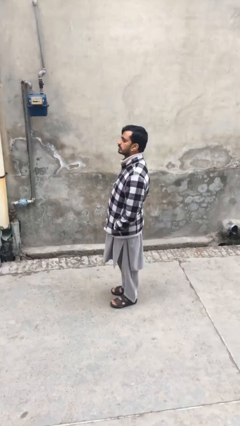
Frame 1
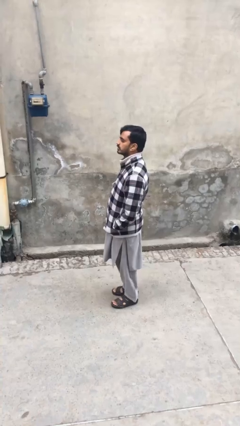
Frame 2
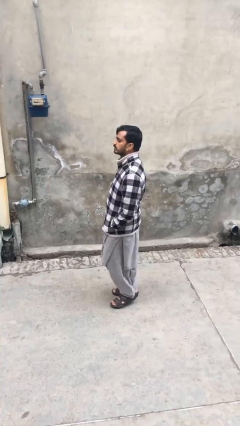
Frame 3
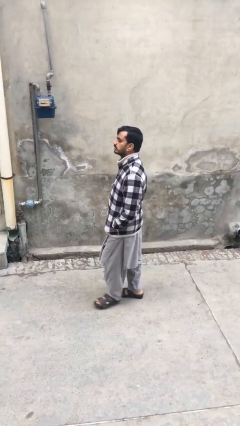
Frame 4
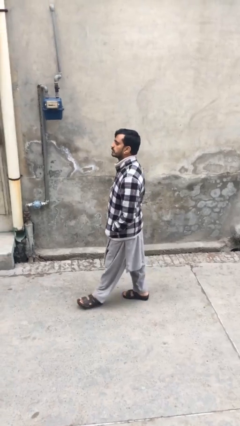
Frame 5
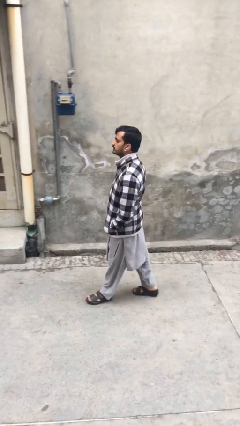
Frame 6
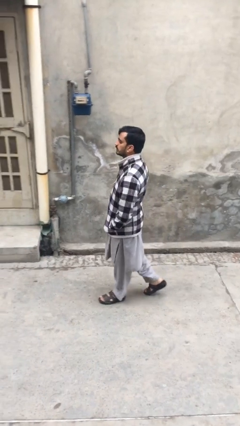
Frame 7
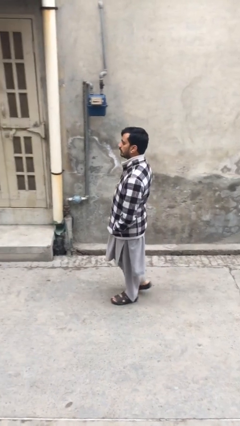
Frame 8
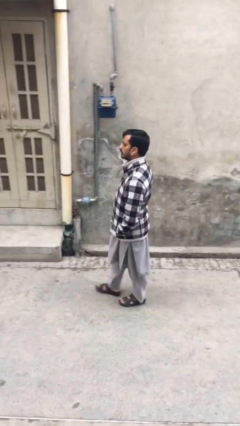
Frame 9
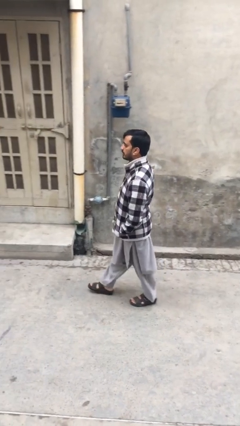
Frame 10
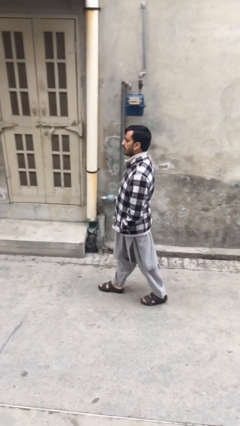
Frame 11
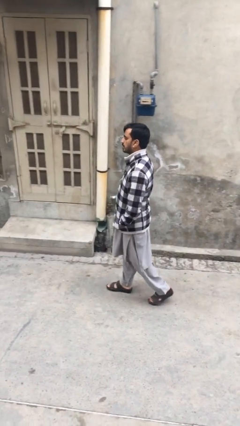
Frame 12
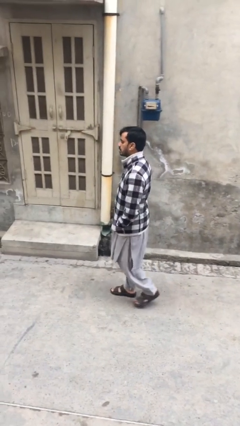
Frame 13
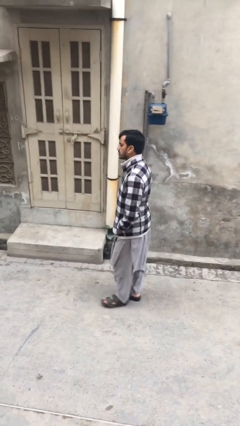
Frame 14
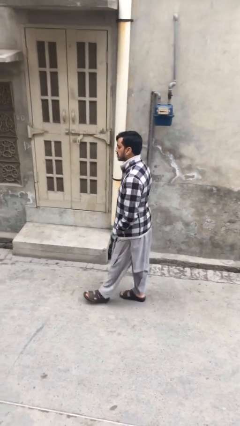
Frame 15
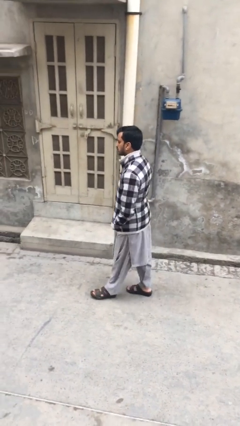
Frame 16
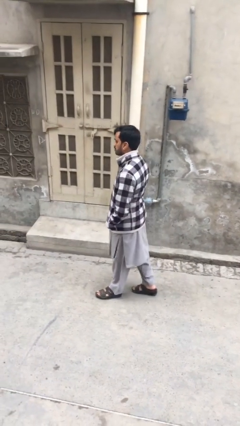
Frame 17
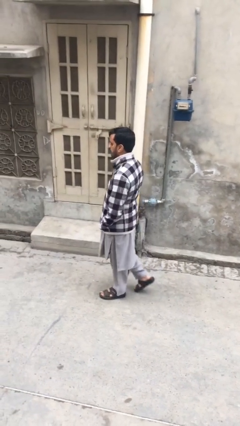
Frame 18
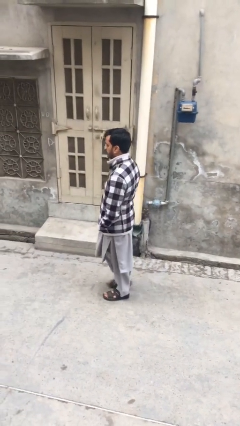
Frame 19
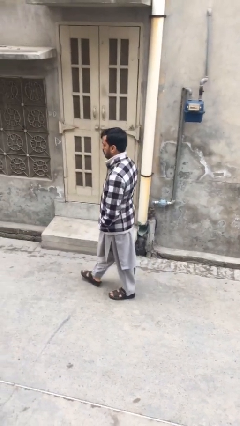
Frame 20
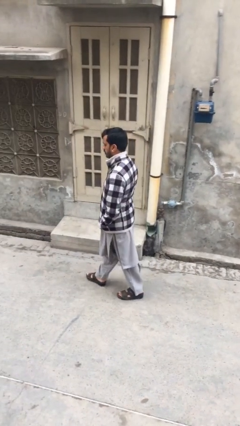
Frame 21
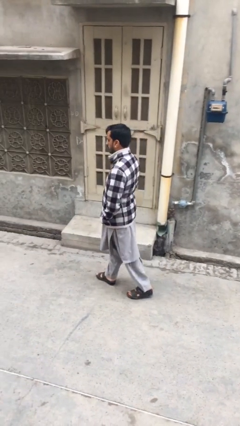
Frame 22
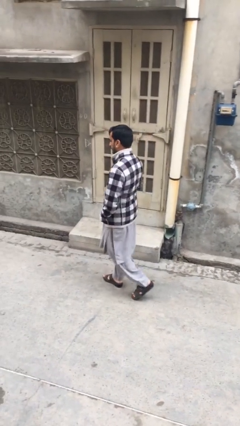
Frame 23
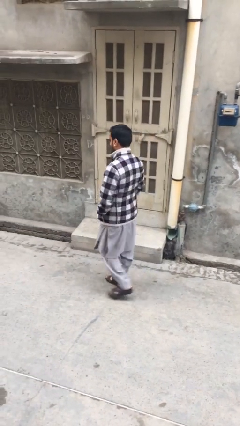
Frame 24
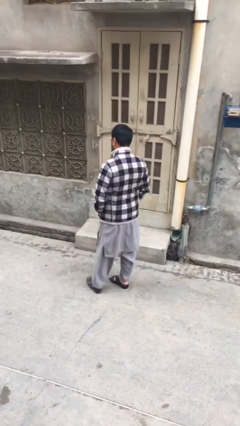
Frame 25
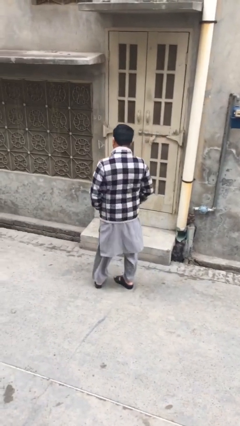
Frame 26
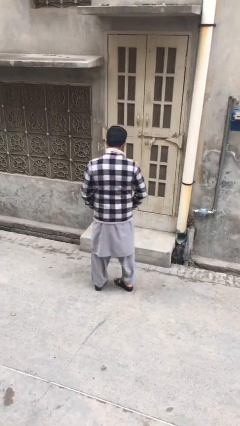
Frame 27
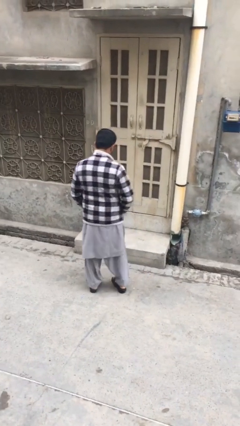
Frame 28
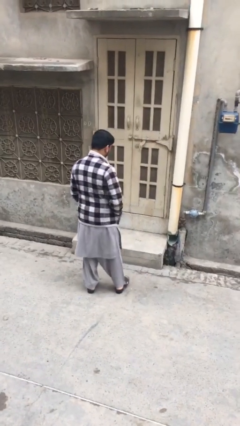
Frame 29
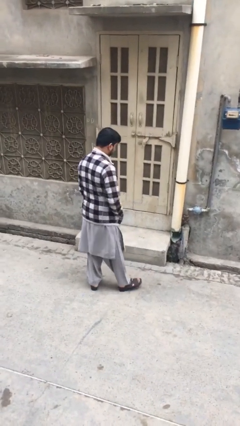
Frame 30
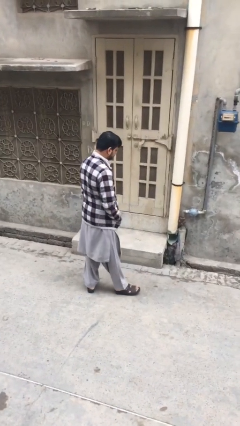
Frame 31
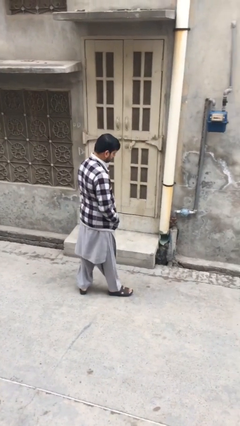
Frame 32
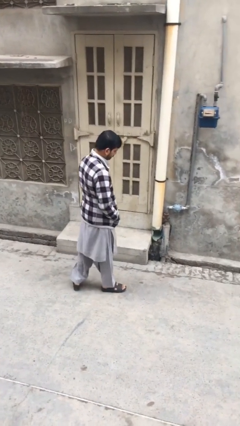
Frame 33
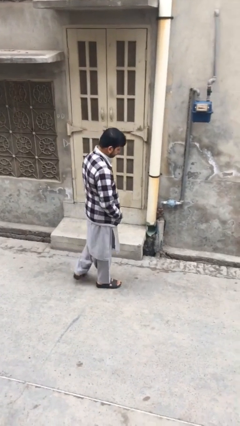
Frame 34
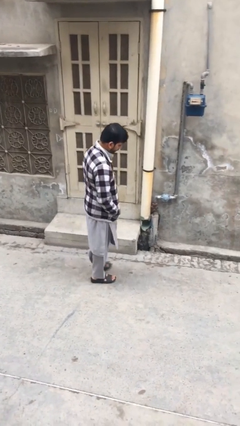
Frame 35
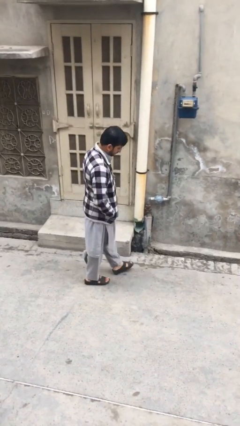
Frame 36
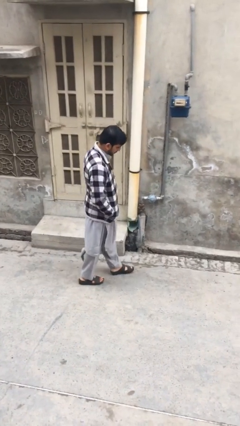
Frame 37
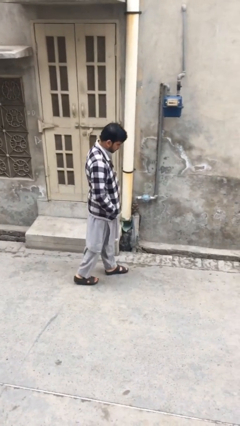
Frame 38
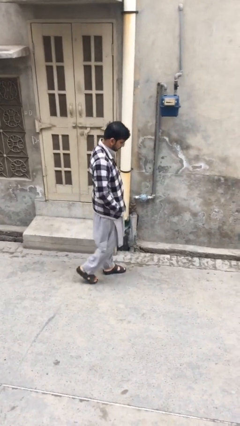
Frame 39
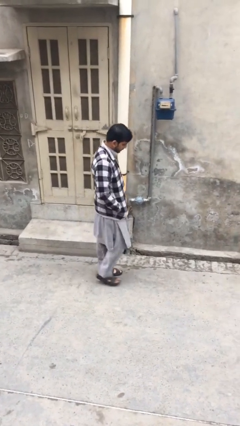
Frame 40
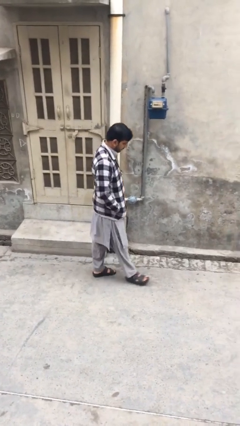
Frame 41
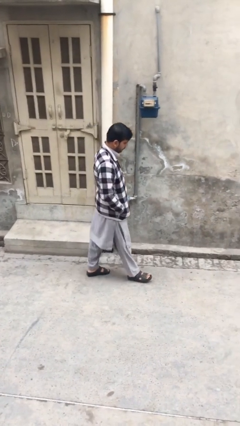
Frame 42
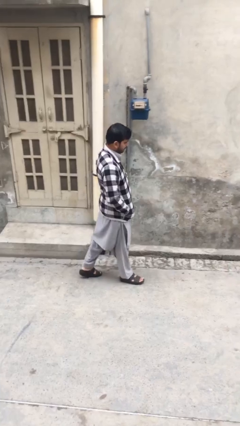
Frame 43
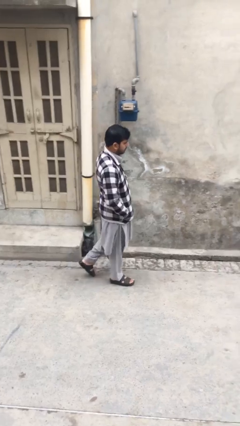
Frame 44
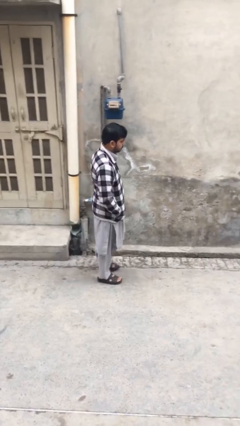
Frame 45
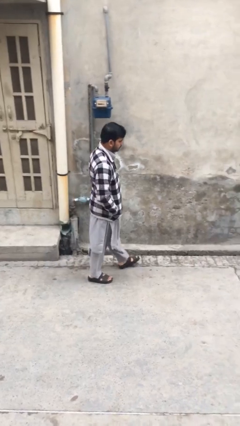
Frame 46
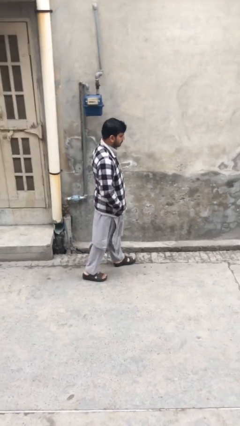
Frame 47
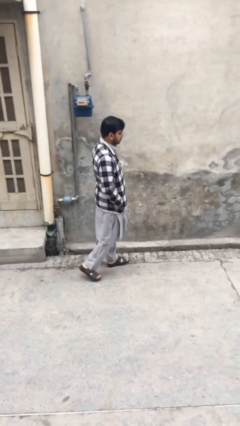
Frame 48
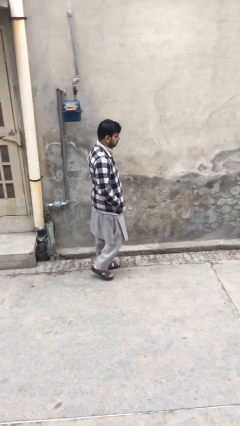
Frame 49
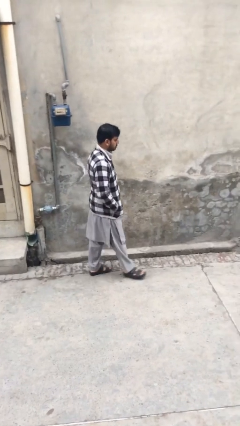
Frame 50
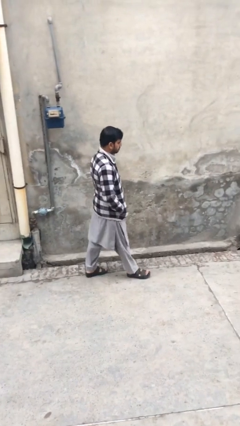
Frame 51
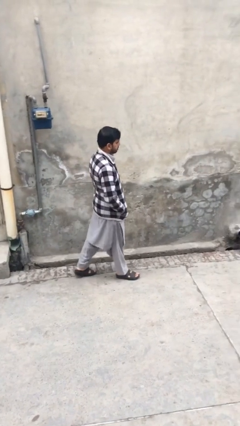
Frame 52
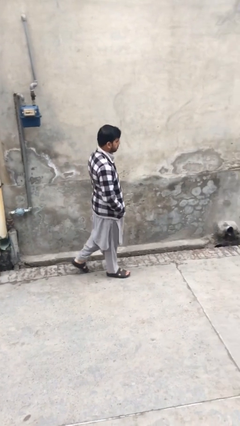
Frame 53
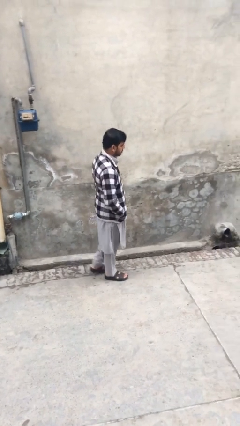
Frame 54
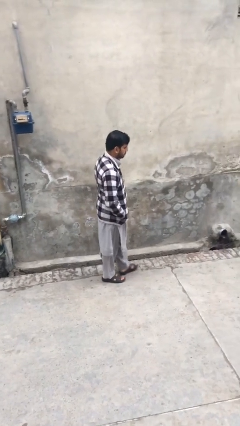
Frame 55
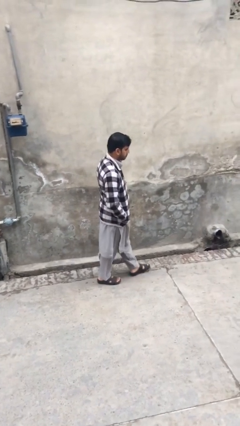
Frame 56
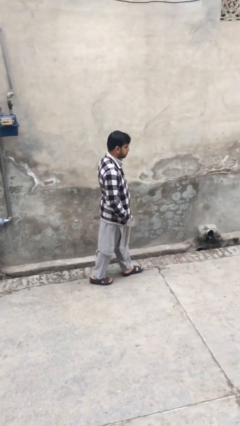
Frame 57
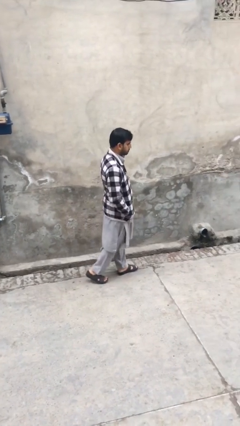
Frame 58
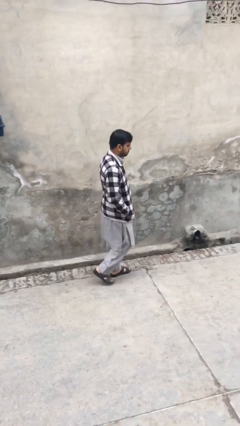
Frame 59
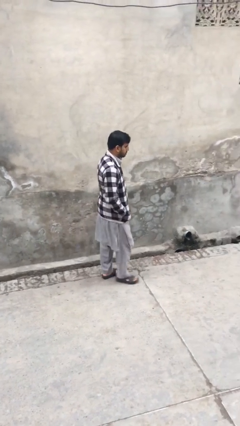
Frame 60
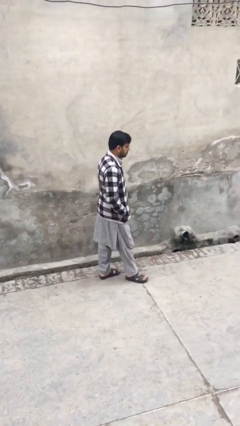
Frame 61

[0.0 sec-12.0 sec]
person walks

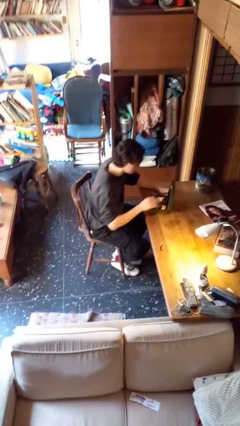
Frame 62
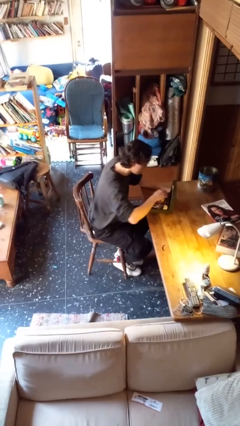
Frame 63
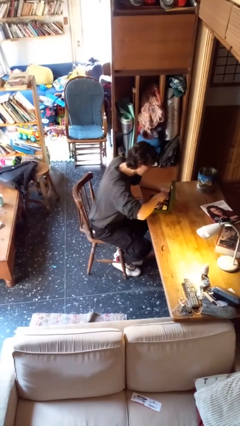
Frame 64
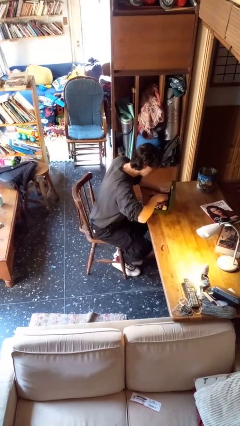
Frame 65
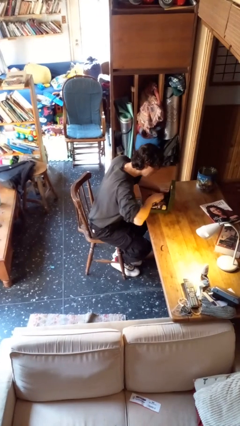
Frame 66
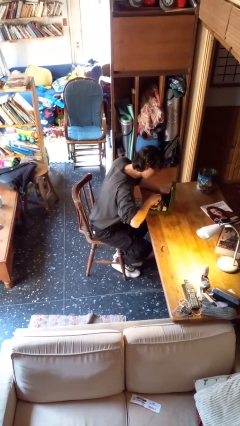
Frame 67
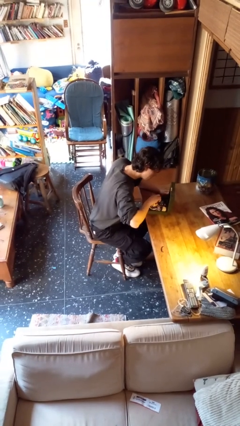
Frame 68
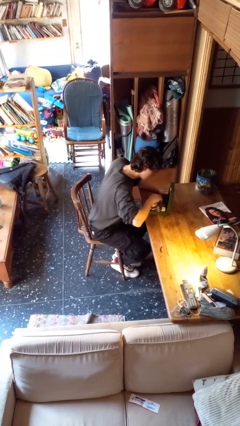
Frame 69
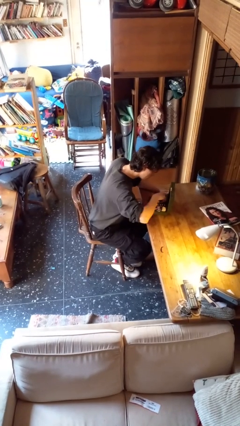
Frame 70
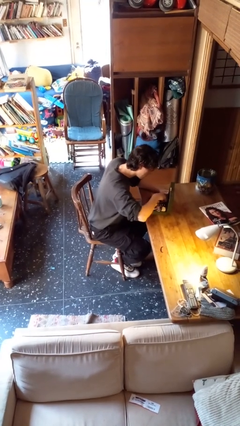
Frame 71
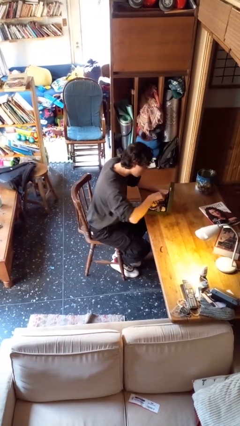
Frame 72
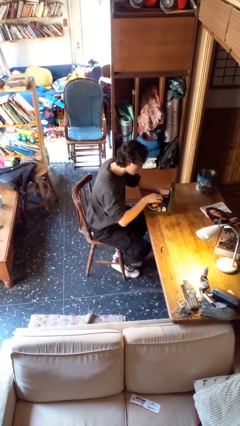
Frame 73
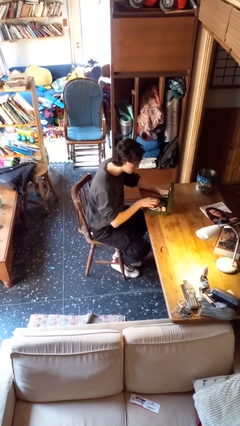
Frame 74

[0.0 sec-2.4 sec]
person searches jewelry box

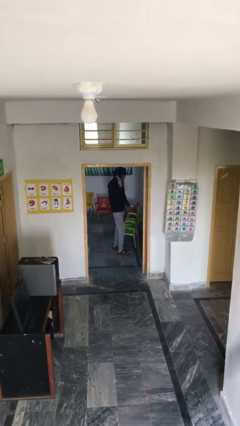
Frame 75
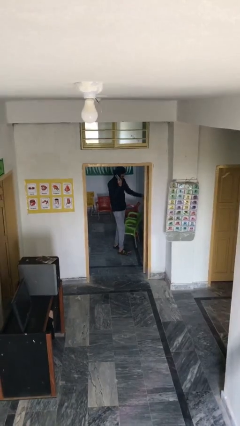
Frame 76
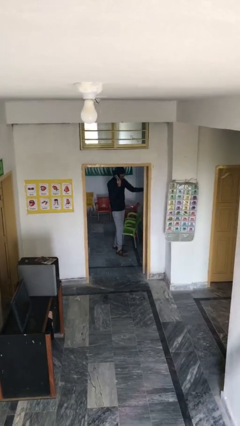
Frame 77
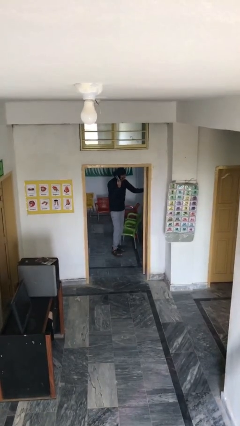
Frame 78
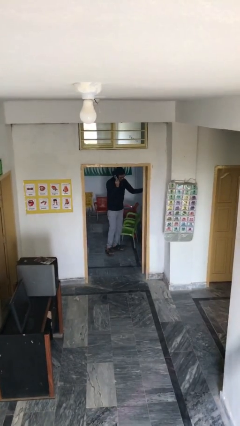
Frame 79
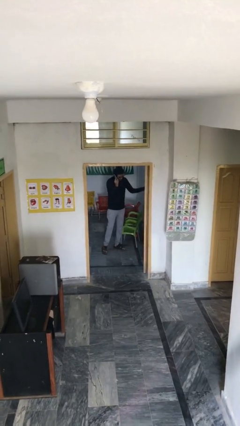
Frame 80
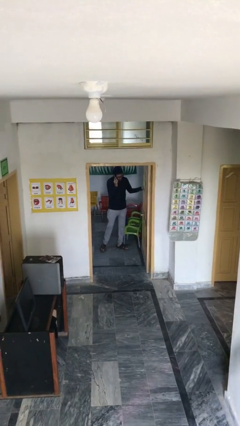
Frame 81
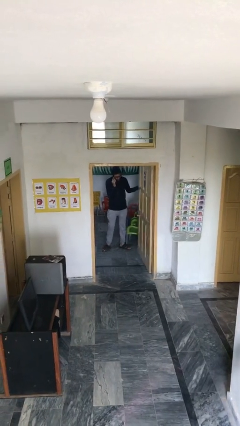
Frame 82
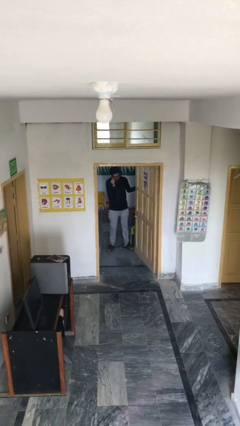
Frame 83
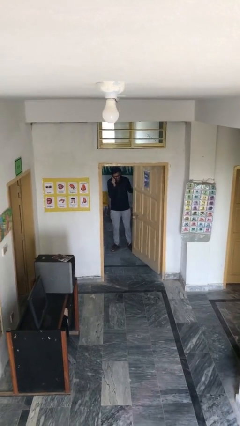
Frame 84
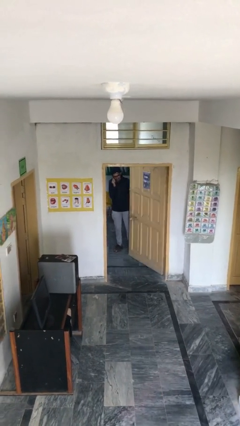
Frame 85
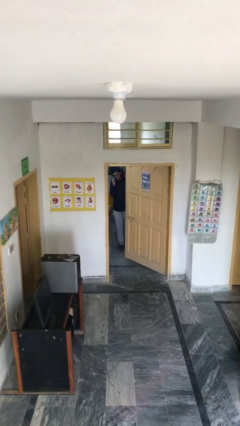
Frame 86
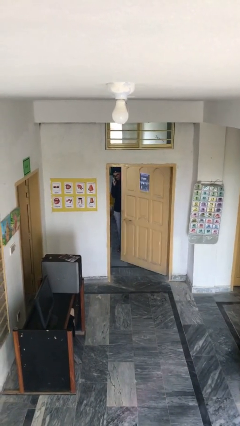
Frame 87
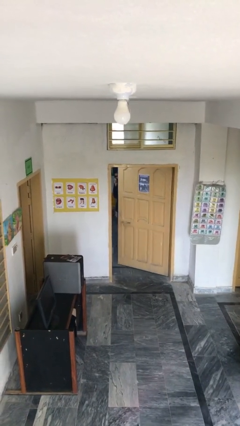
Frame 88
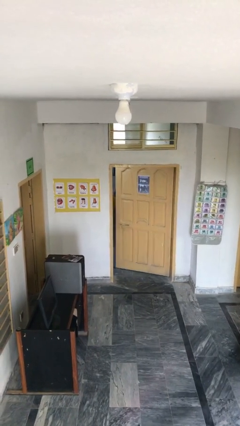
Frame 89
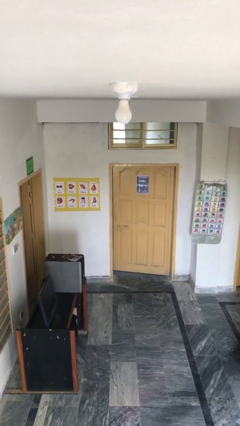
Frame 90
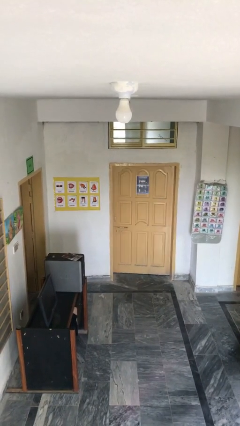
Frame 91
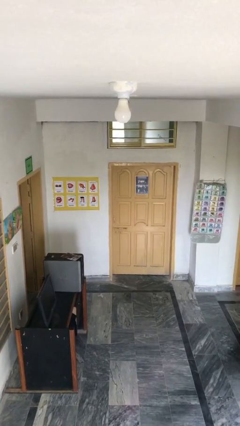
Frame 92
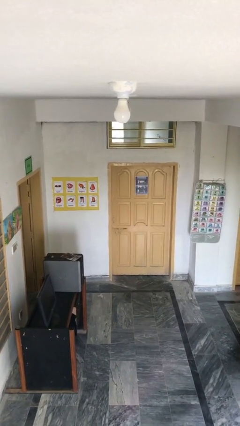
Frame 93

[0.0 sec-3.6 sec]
person closes facility door
